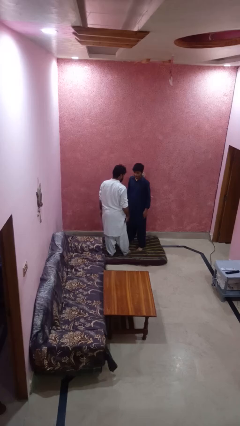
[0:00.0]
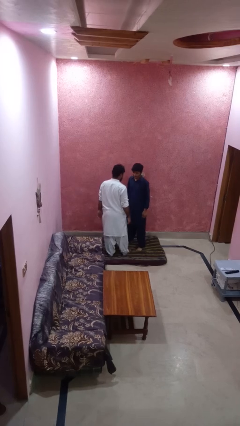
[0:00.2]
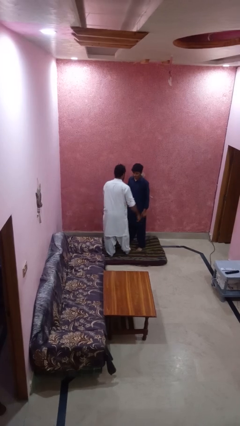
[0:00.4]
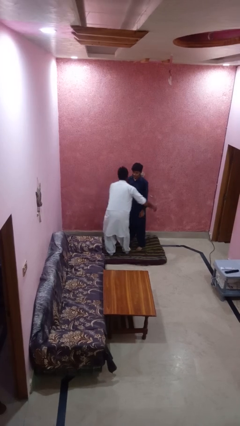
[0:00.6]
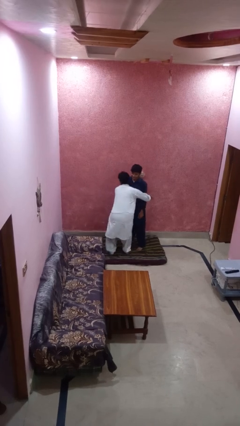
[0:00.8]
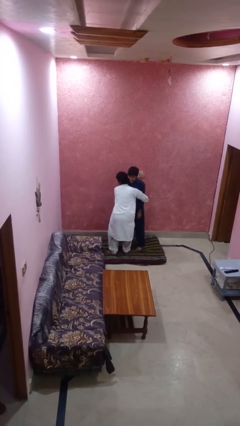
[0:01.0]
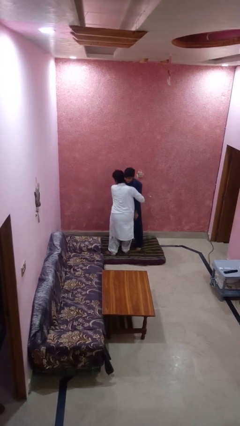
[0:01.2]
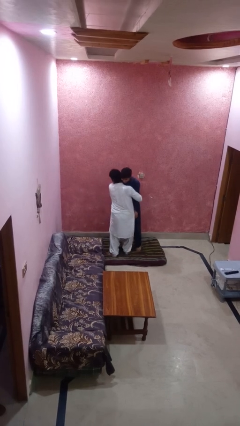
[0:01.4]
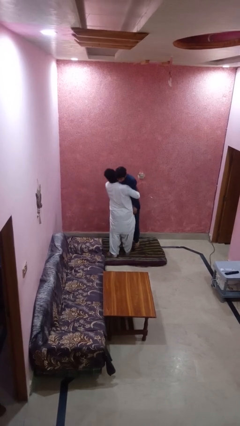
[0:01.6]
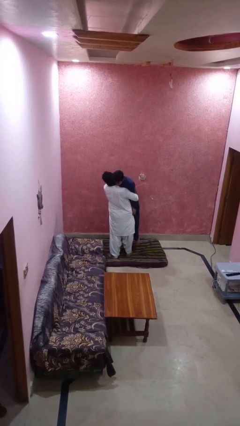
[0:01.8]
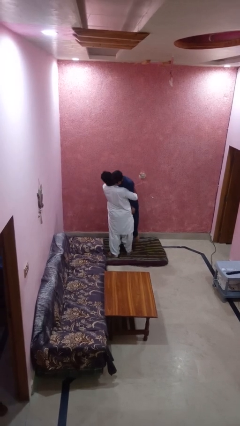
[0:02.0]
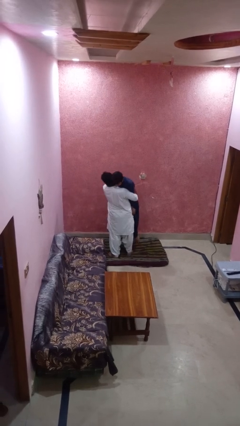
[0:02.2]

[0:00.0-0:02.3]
person picks up person

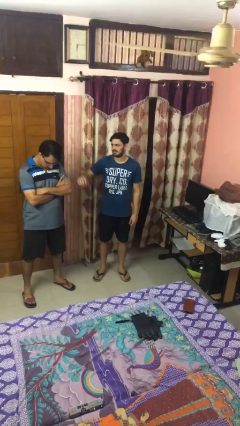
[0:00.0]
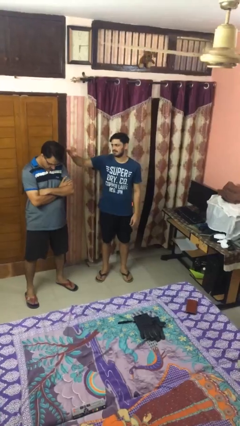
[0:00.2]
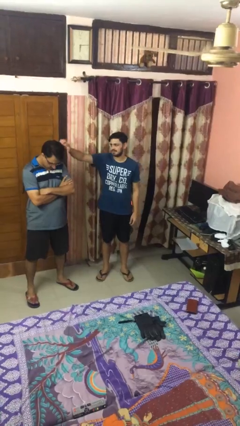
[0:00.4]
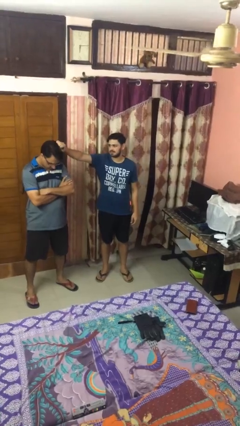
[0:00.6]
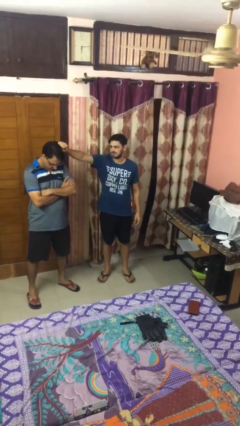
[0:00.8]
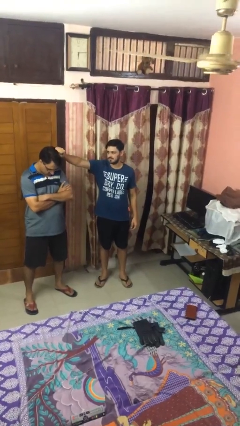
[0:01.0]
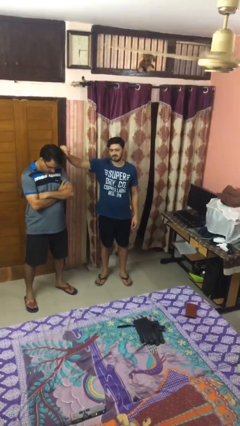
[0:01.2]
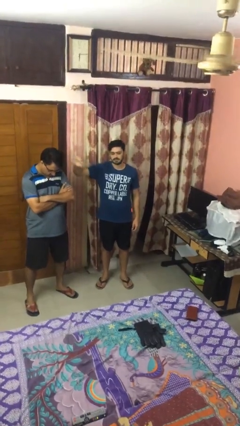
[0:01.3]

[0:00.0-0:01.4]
person grabs person by hair

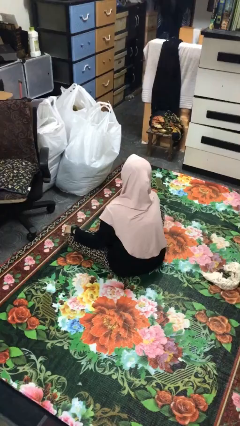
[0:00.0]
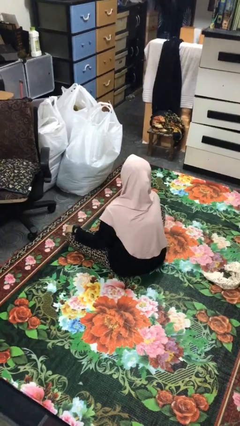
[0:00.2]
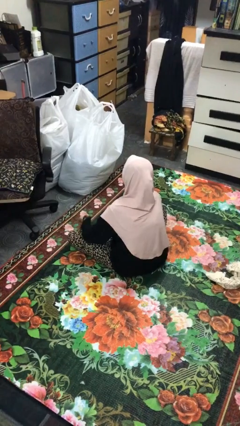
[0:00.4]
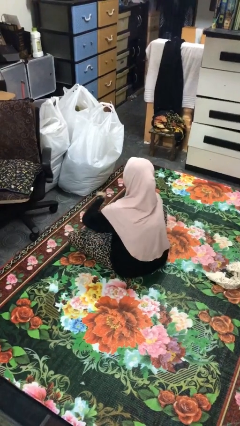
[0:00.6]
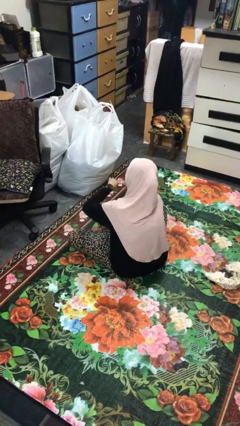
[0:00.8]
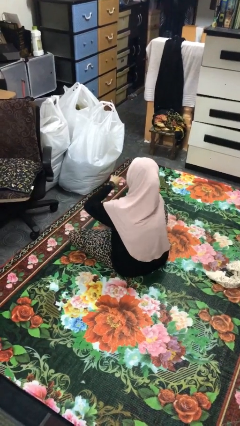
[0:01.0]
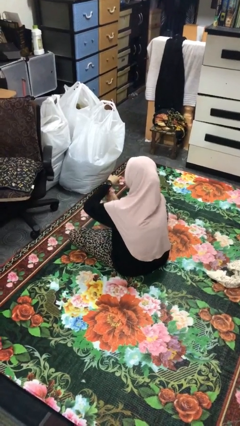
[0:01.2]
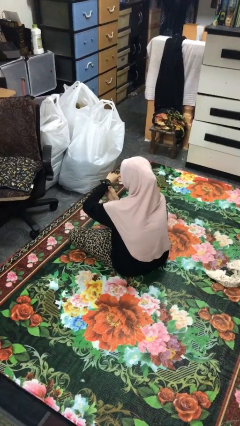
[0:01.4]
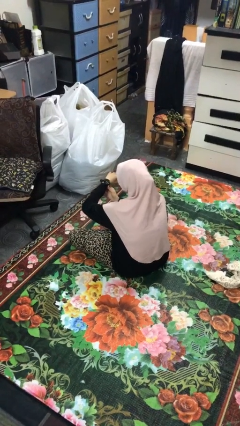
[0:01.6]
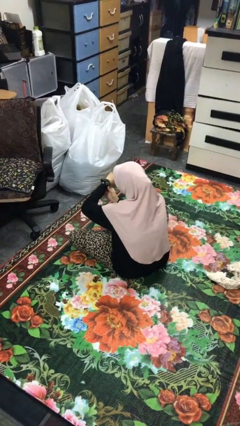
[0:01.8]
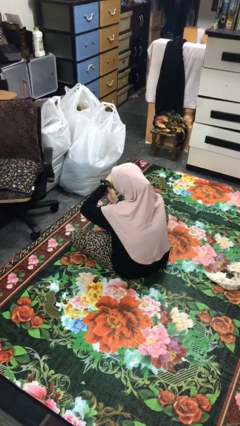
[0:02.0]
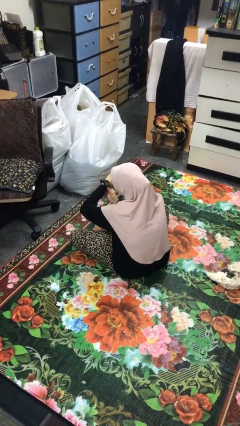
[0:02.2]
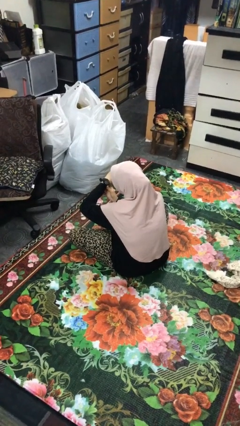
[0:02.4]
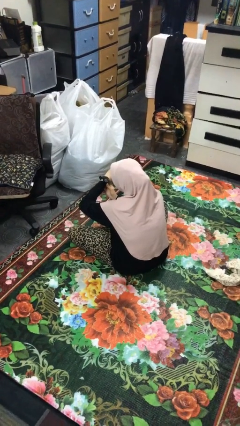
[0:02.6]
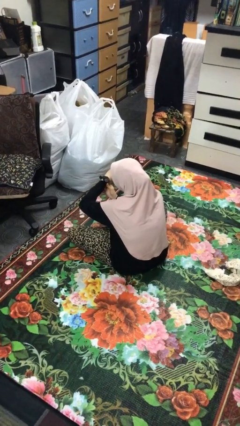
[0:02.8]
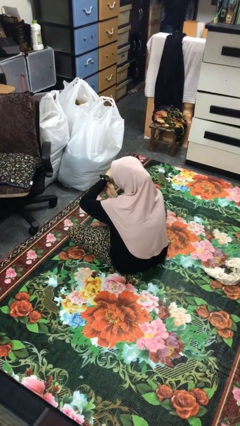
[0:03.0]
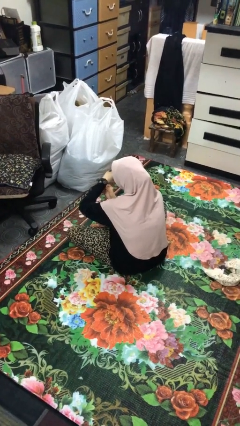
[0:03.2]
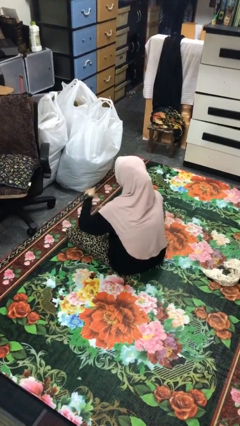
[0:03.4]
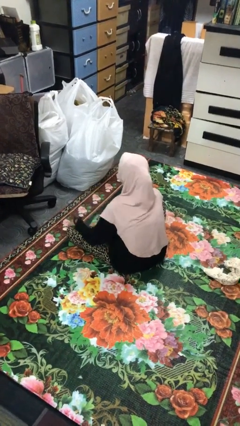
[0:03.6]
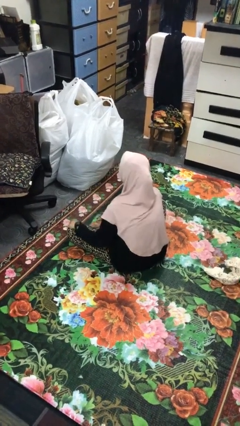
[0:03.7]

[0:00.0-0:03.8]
person looks at wristwatch

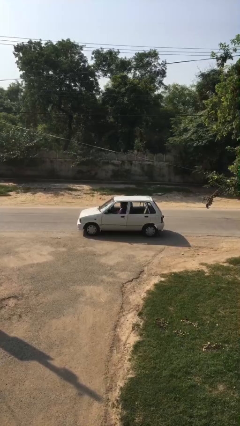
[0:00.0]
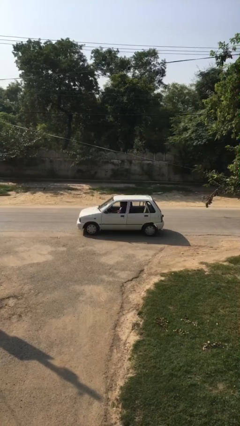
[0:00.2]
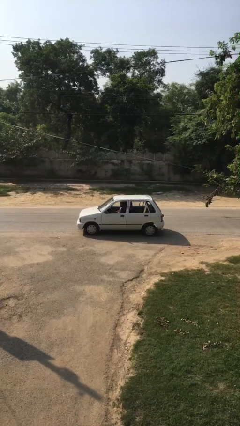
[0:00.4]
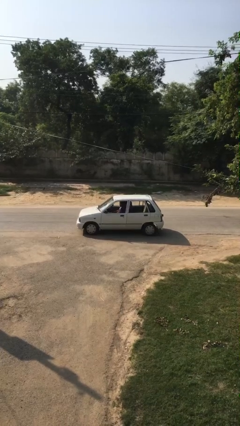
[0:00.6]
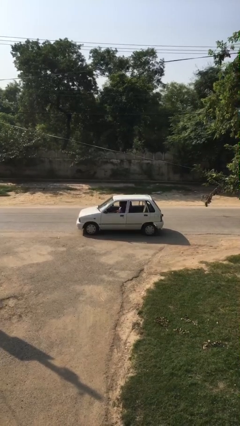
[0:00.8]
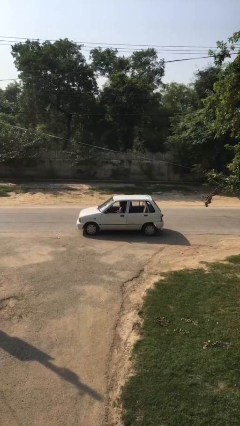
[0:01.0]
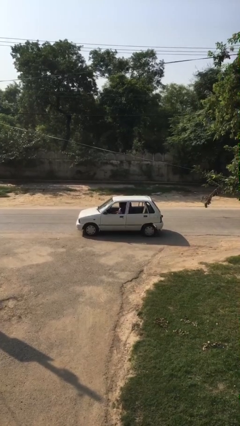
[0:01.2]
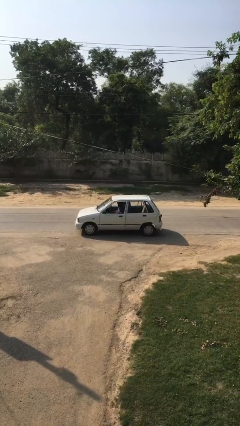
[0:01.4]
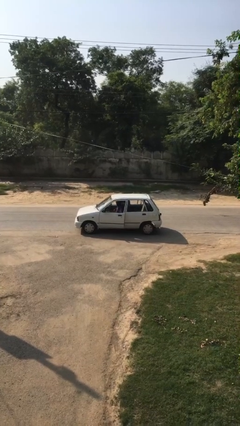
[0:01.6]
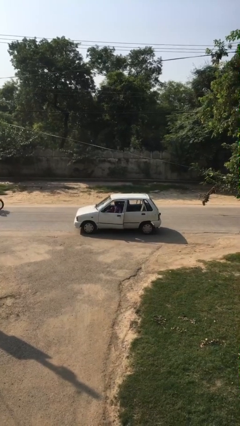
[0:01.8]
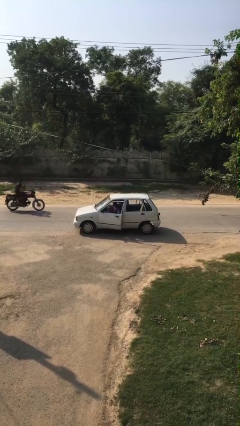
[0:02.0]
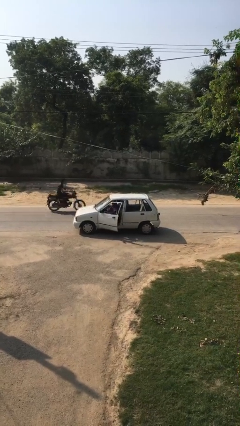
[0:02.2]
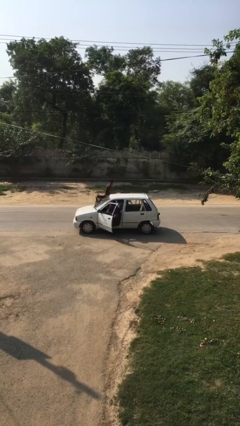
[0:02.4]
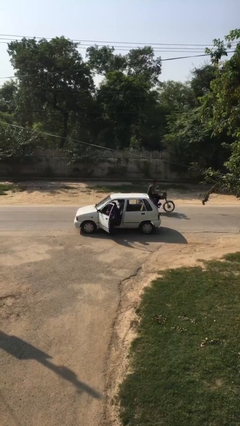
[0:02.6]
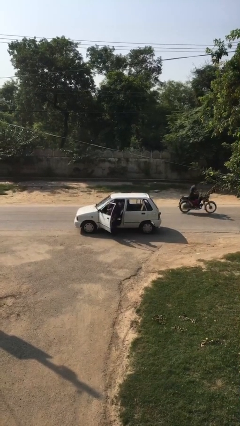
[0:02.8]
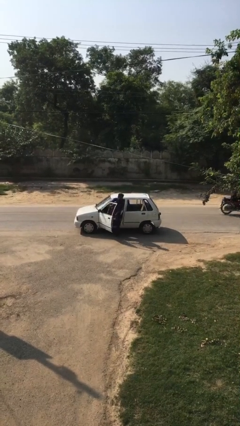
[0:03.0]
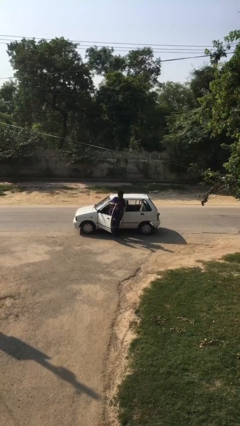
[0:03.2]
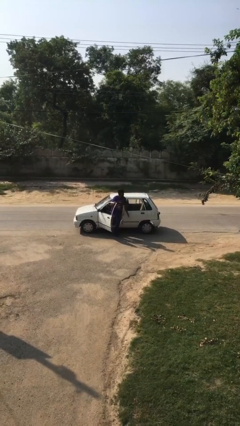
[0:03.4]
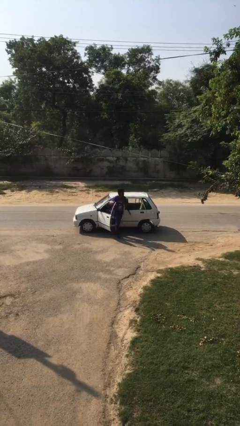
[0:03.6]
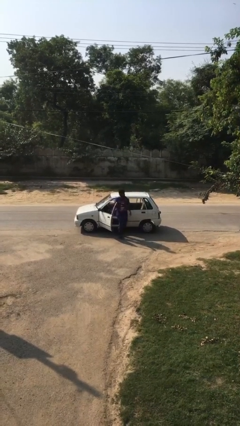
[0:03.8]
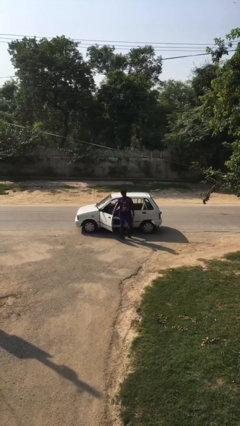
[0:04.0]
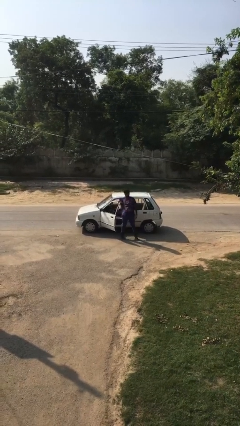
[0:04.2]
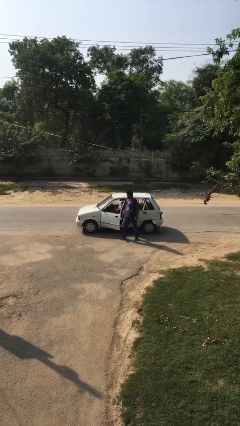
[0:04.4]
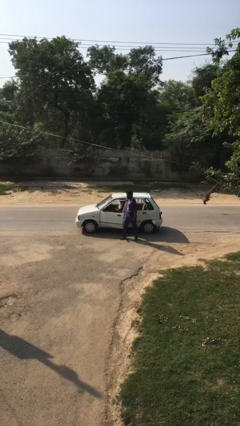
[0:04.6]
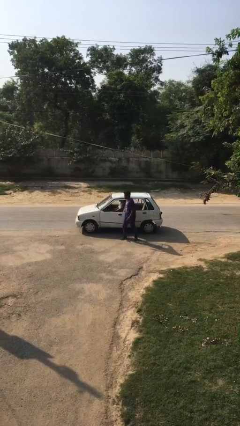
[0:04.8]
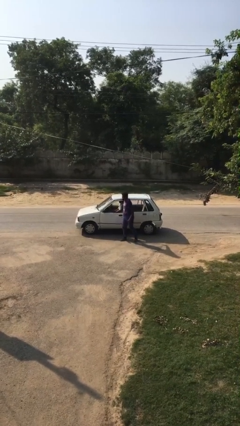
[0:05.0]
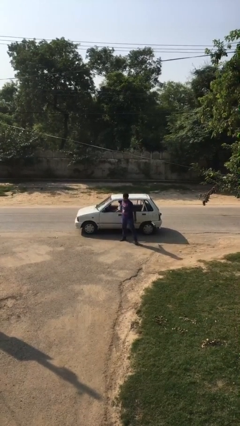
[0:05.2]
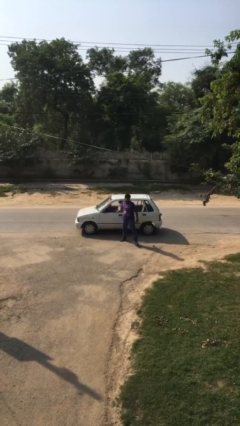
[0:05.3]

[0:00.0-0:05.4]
car drops off person

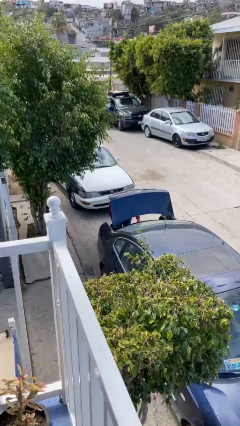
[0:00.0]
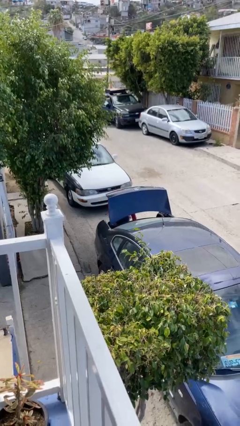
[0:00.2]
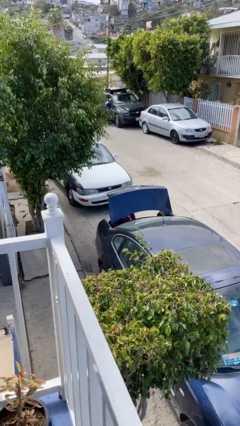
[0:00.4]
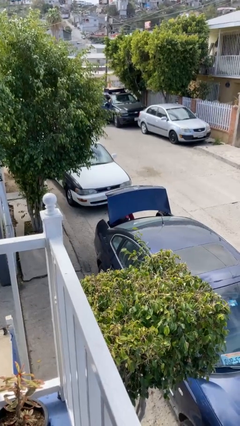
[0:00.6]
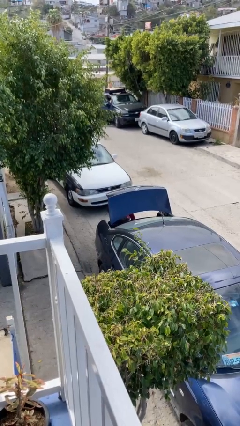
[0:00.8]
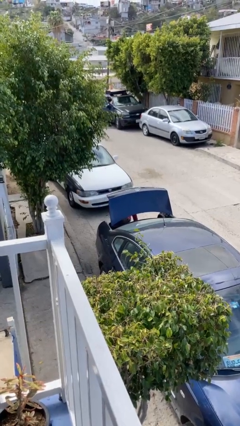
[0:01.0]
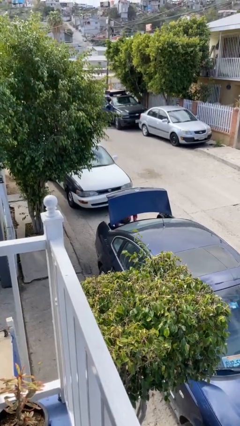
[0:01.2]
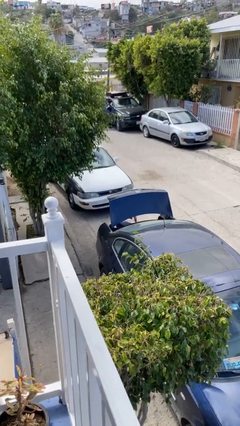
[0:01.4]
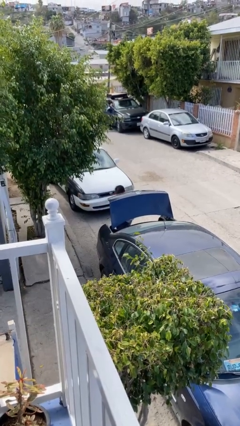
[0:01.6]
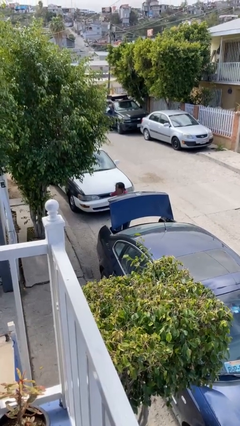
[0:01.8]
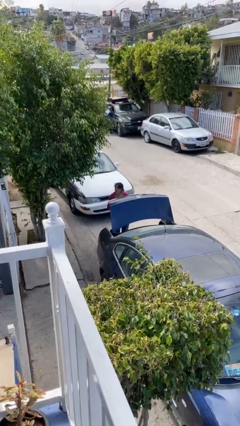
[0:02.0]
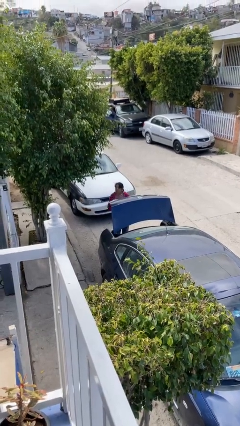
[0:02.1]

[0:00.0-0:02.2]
person unloads car

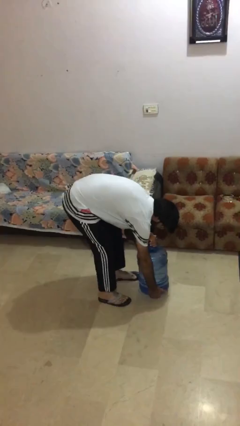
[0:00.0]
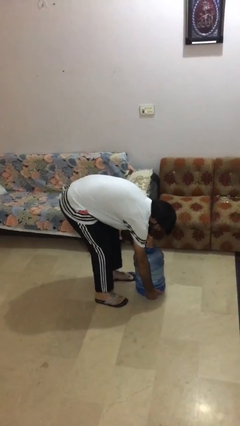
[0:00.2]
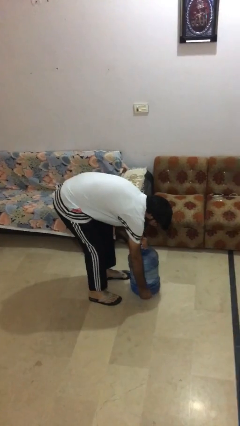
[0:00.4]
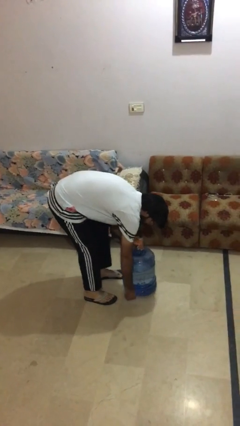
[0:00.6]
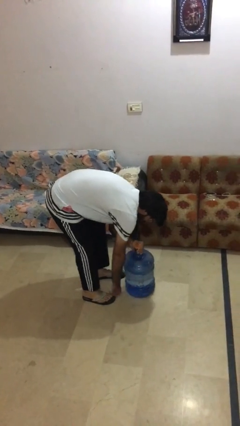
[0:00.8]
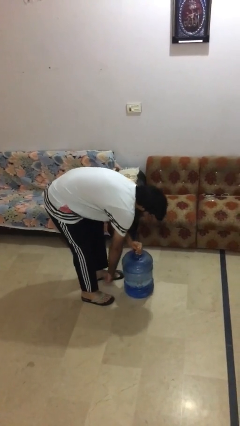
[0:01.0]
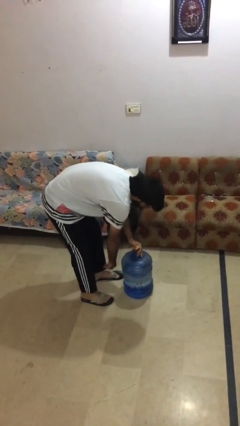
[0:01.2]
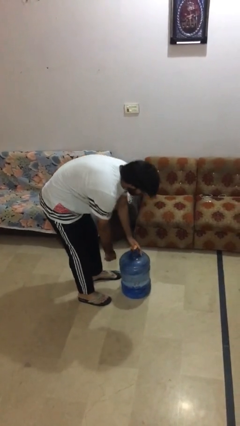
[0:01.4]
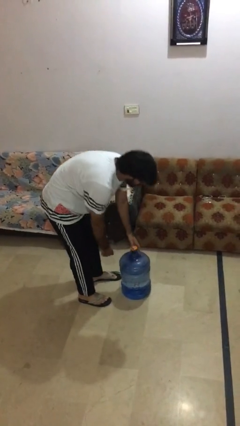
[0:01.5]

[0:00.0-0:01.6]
person puts down object on floor

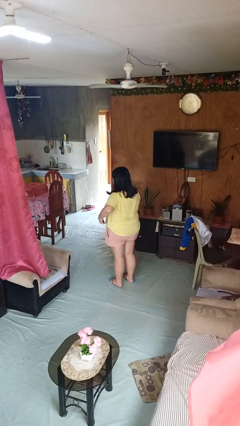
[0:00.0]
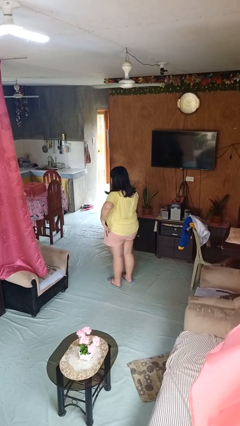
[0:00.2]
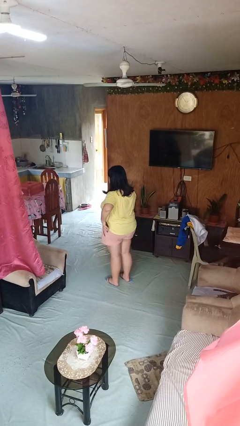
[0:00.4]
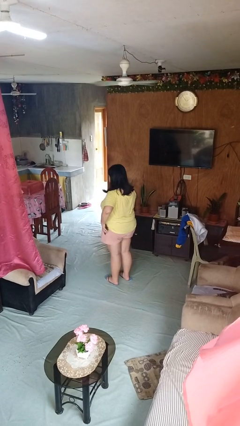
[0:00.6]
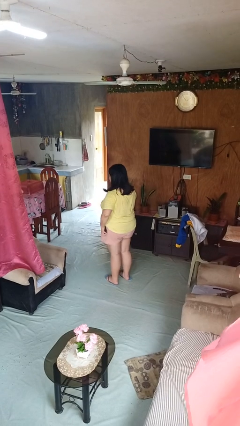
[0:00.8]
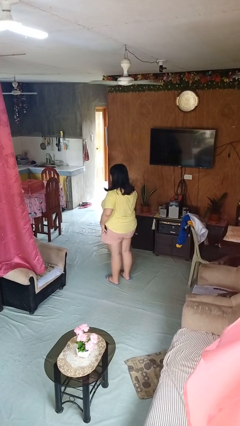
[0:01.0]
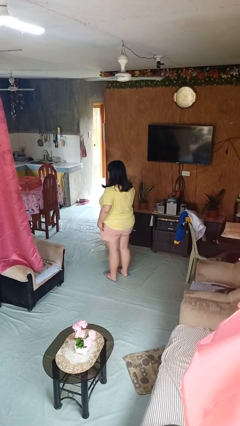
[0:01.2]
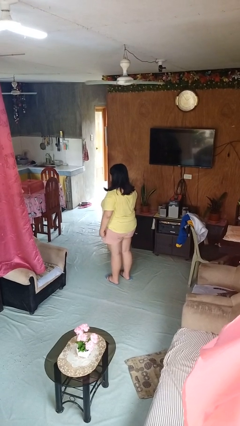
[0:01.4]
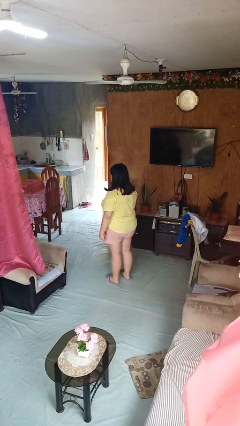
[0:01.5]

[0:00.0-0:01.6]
person puts phone into pocket
